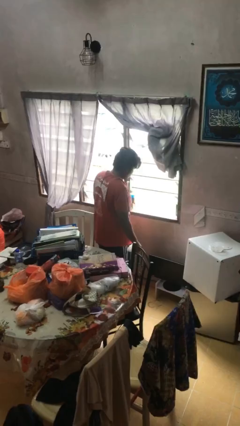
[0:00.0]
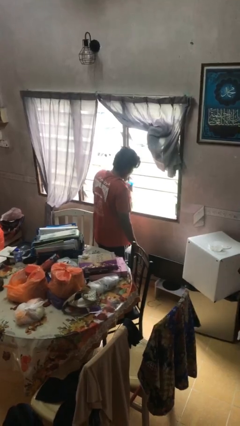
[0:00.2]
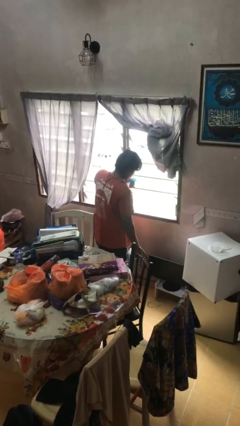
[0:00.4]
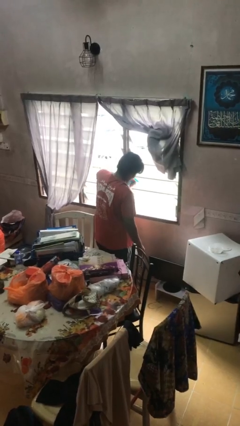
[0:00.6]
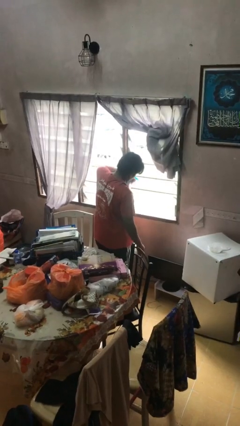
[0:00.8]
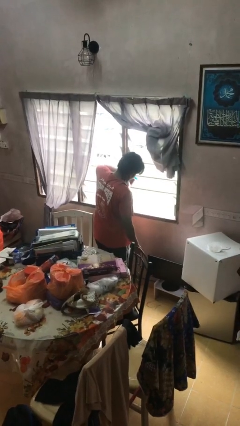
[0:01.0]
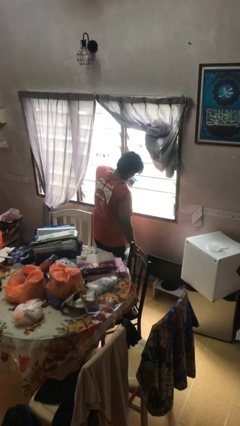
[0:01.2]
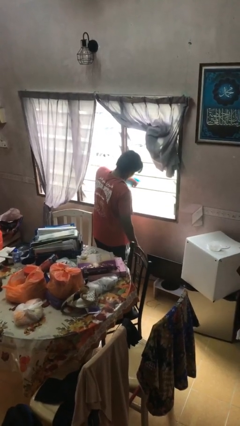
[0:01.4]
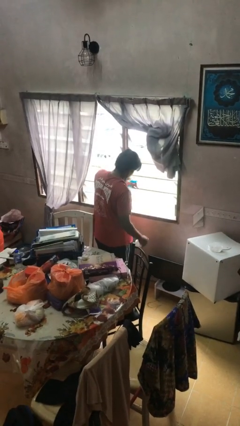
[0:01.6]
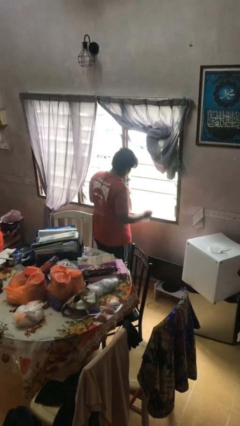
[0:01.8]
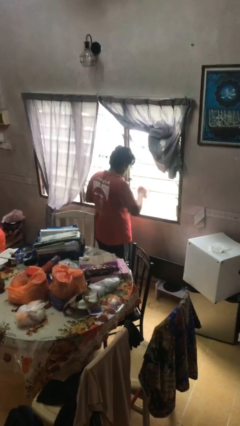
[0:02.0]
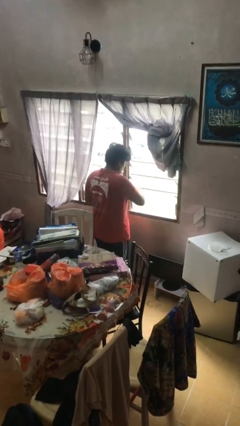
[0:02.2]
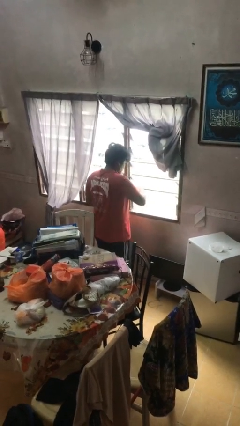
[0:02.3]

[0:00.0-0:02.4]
person sprays from bottle

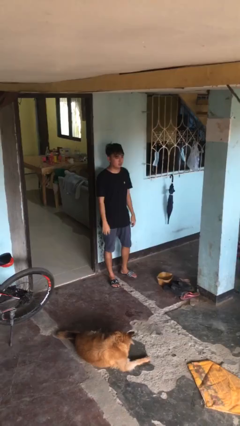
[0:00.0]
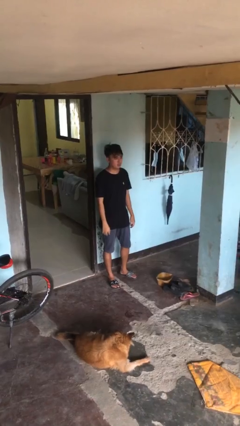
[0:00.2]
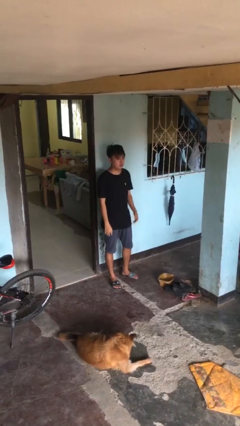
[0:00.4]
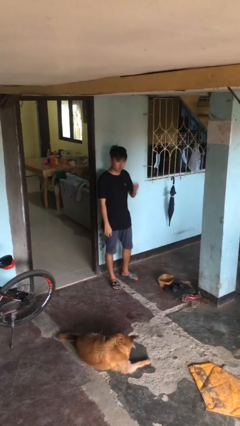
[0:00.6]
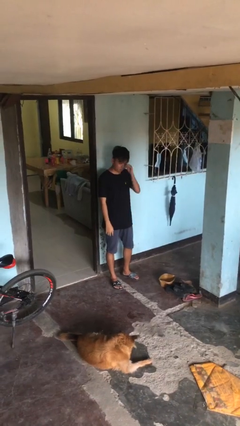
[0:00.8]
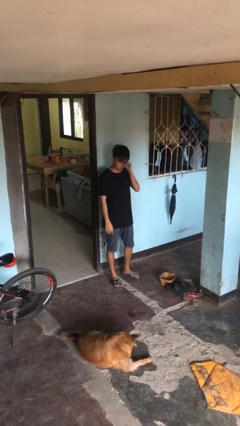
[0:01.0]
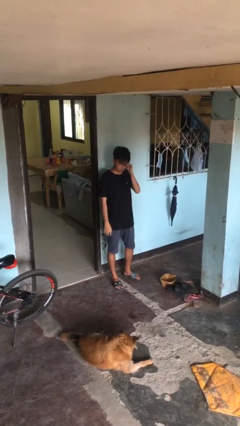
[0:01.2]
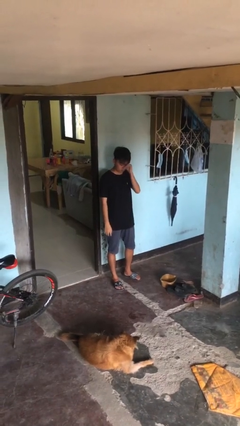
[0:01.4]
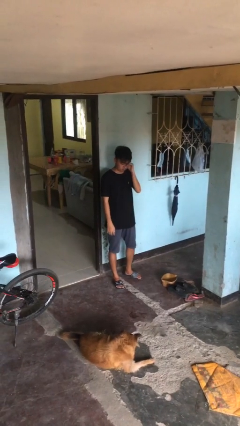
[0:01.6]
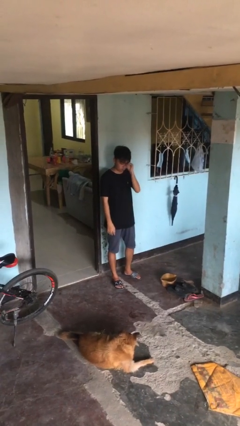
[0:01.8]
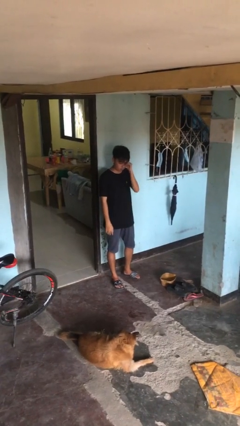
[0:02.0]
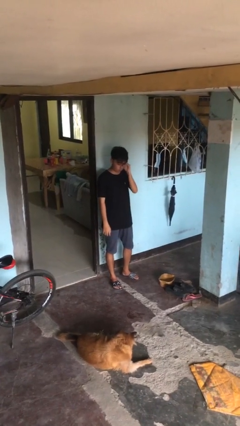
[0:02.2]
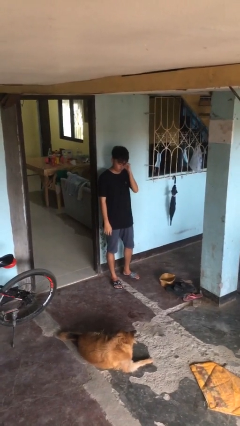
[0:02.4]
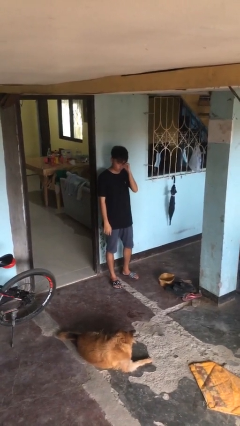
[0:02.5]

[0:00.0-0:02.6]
person rubs eyes

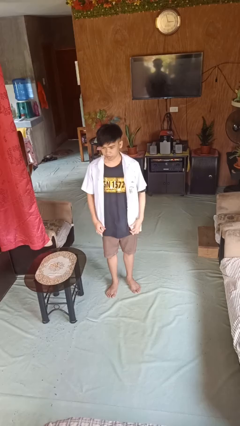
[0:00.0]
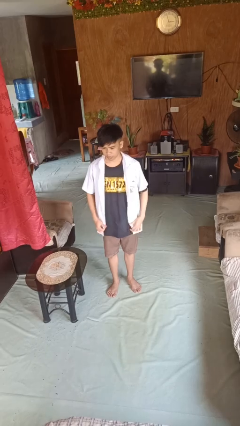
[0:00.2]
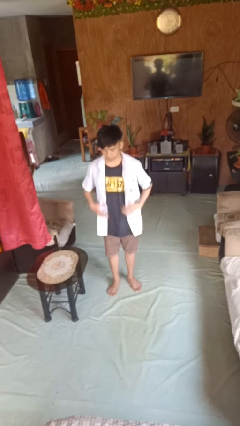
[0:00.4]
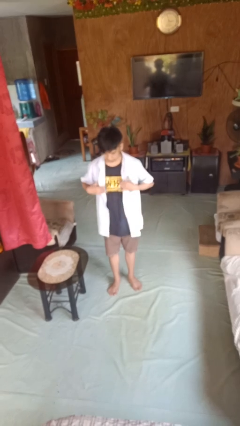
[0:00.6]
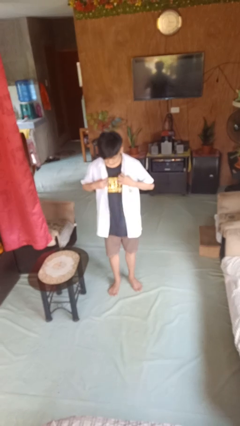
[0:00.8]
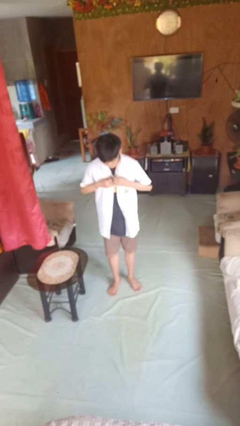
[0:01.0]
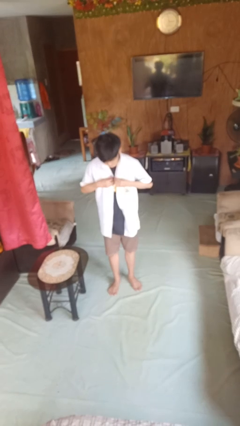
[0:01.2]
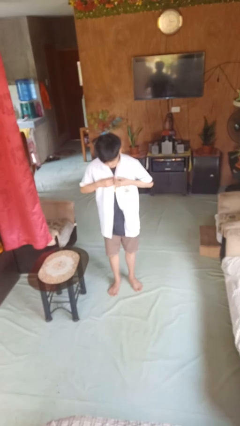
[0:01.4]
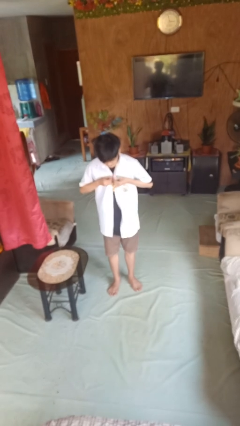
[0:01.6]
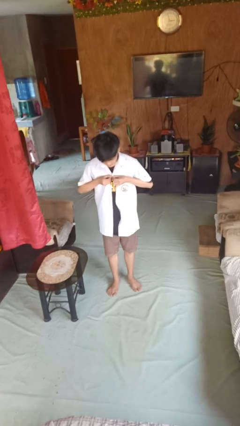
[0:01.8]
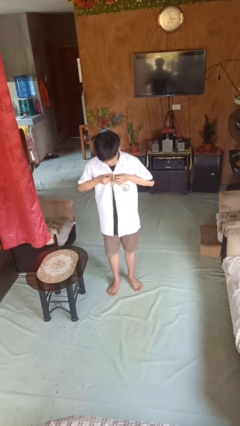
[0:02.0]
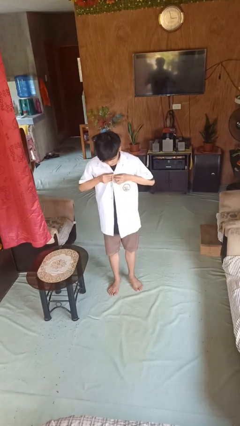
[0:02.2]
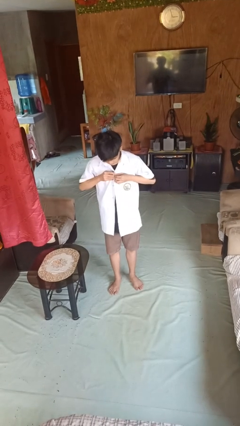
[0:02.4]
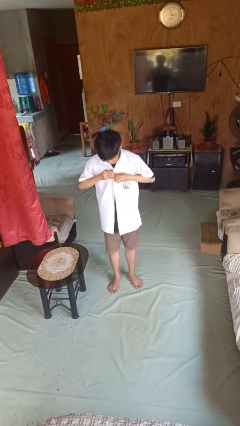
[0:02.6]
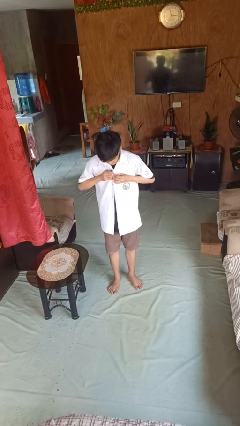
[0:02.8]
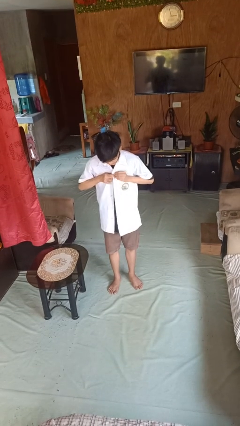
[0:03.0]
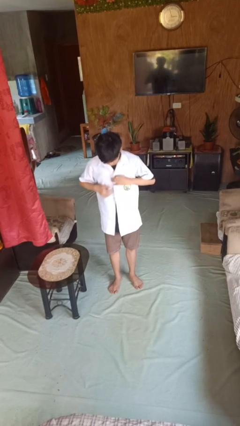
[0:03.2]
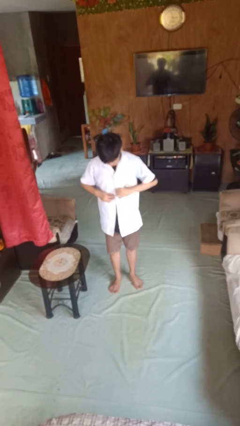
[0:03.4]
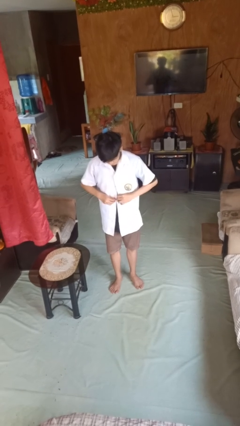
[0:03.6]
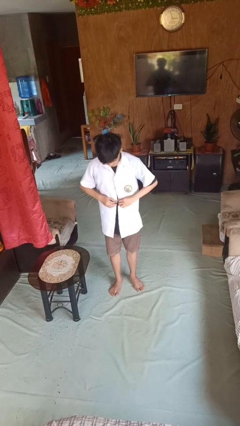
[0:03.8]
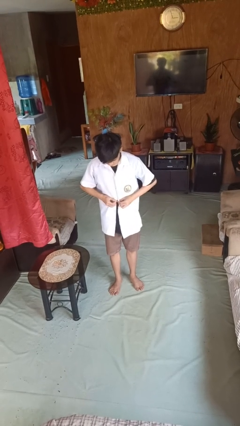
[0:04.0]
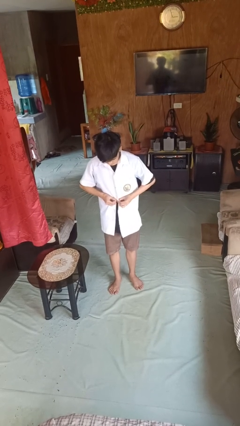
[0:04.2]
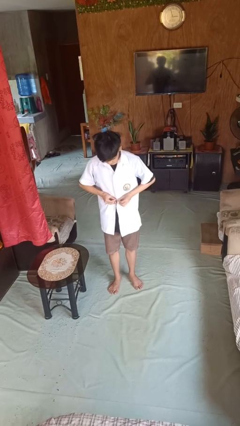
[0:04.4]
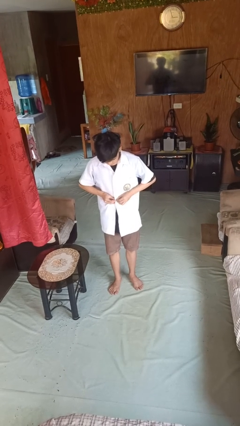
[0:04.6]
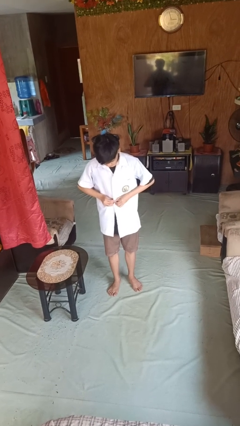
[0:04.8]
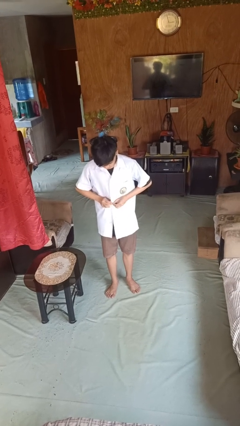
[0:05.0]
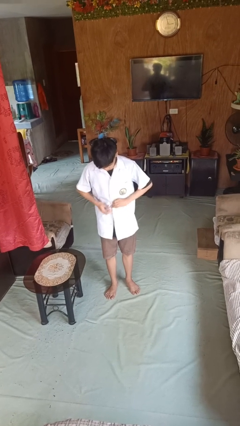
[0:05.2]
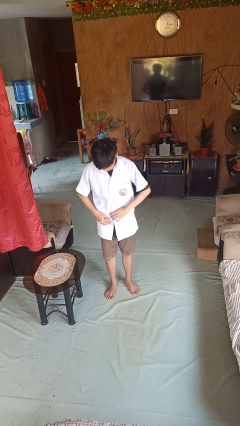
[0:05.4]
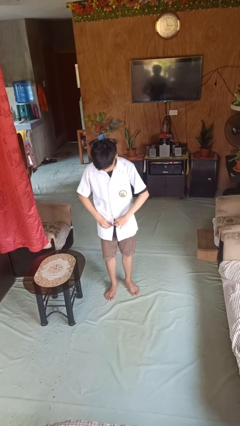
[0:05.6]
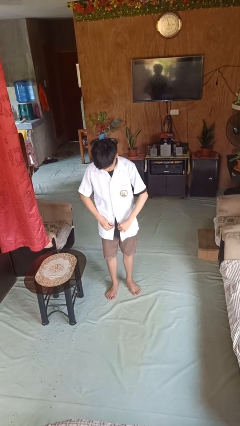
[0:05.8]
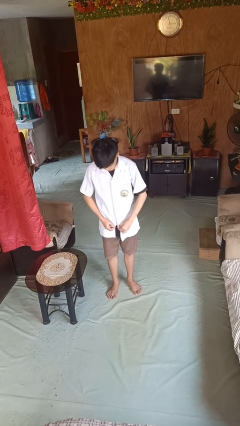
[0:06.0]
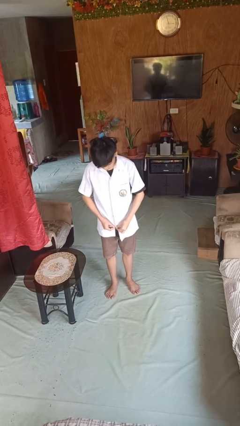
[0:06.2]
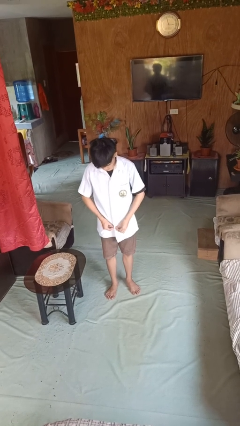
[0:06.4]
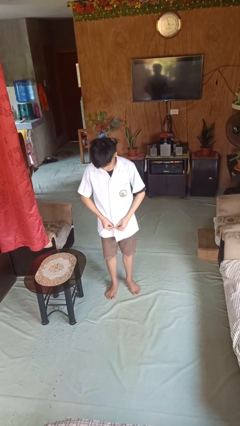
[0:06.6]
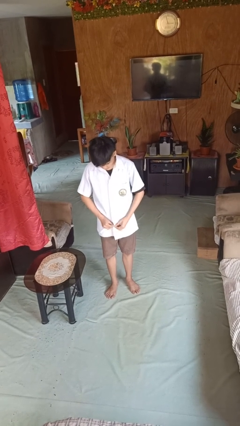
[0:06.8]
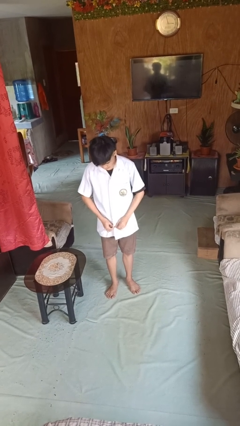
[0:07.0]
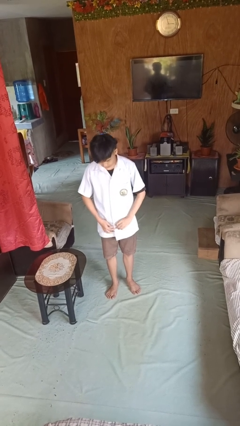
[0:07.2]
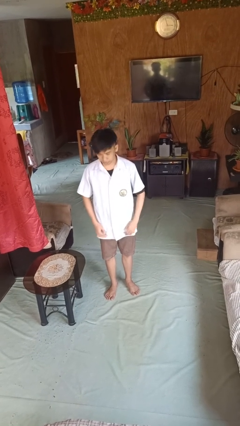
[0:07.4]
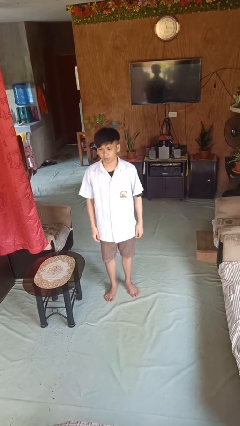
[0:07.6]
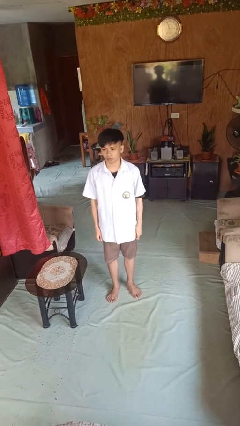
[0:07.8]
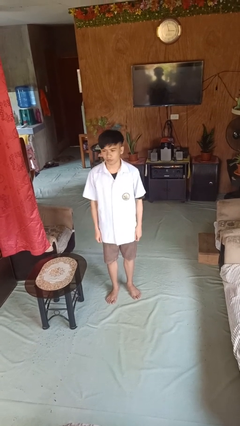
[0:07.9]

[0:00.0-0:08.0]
person buttons shirt

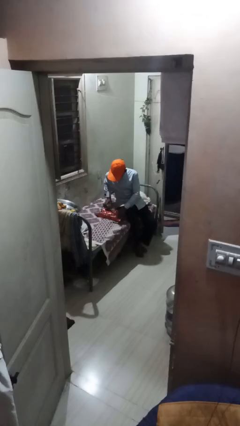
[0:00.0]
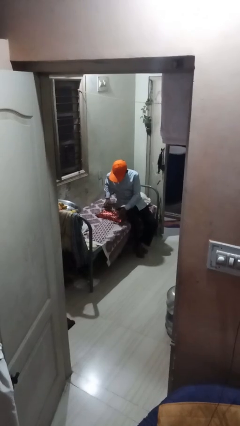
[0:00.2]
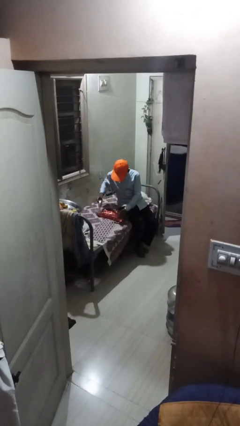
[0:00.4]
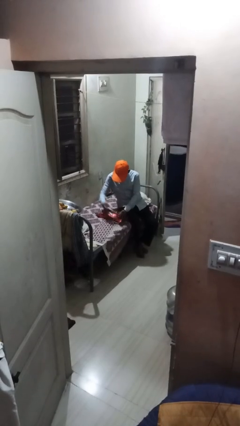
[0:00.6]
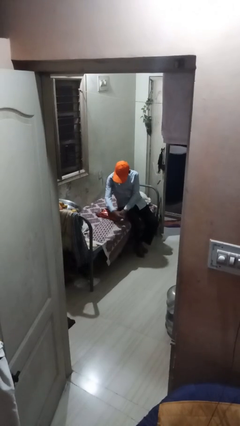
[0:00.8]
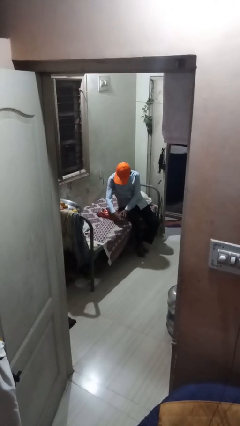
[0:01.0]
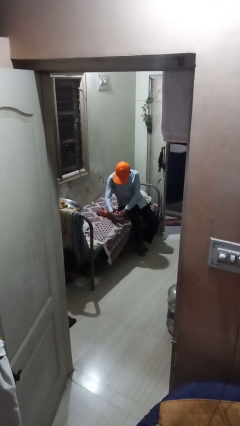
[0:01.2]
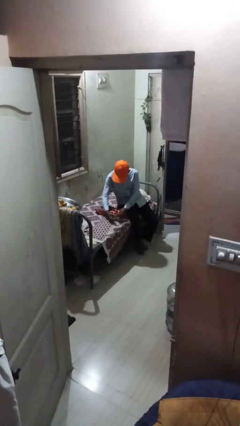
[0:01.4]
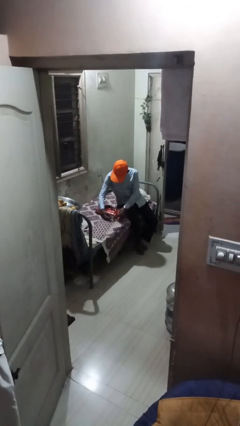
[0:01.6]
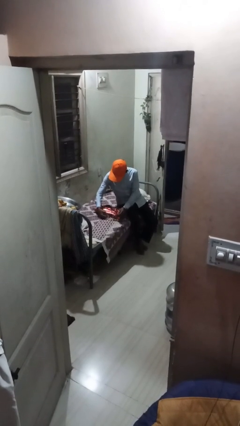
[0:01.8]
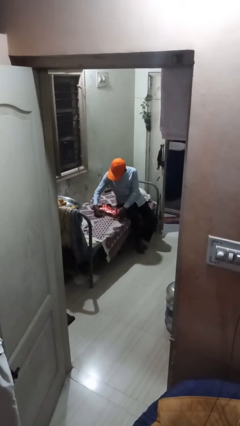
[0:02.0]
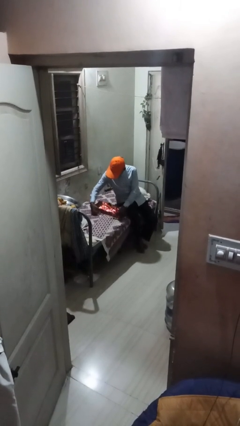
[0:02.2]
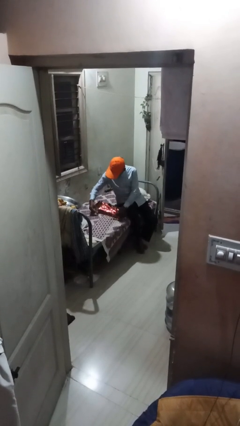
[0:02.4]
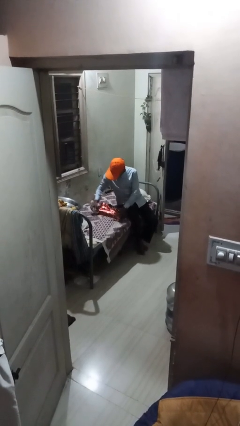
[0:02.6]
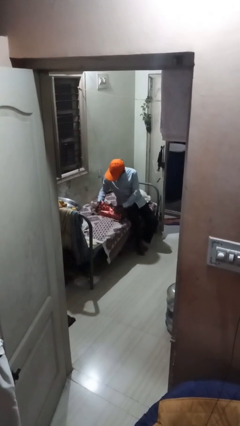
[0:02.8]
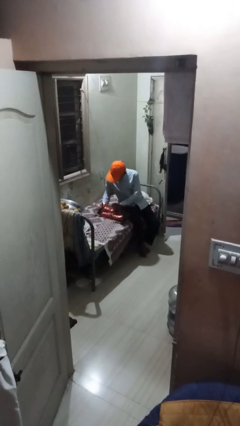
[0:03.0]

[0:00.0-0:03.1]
person wraps box

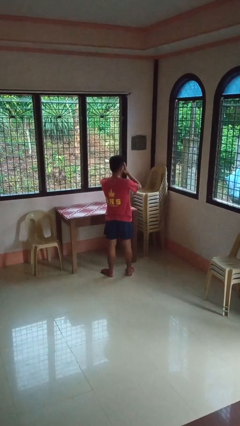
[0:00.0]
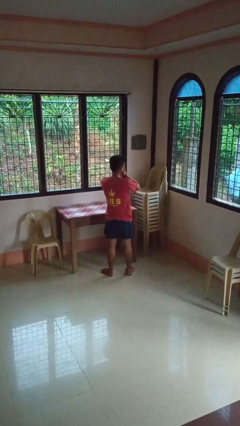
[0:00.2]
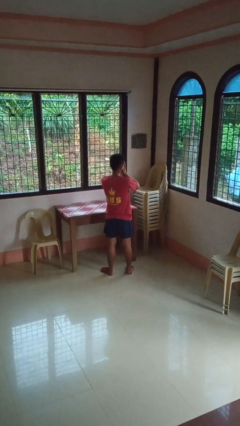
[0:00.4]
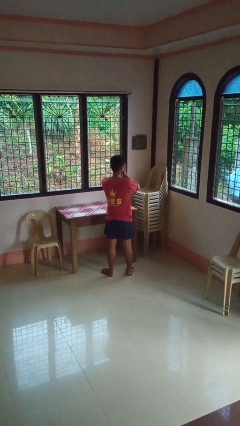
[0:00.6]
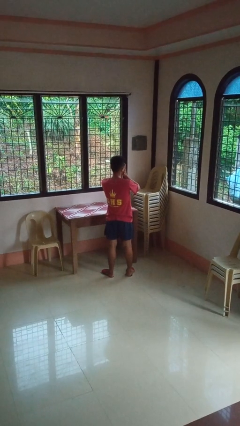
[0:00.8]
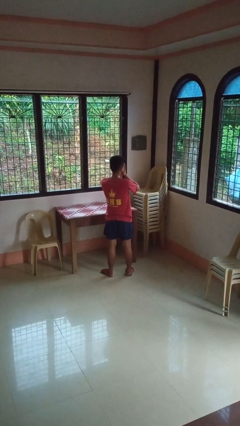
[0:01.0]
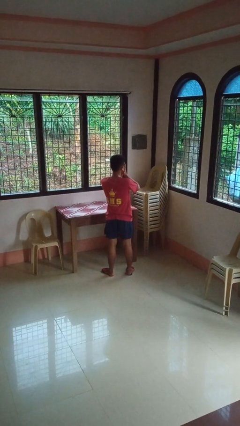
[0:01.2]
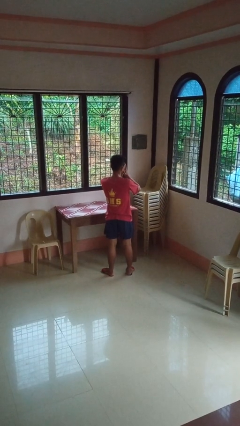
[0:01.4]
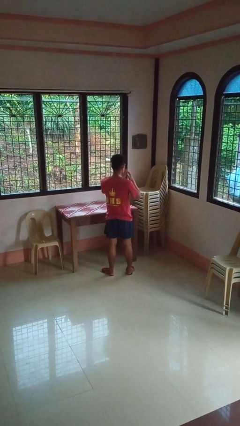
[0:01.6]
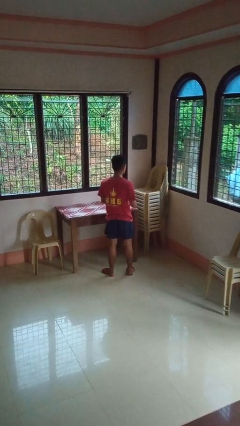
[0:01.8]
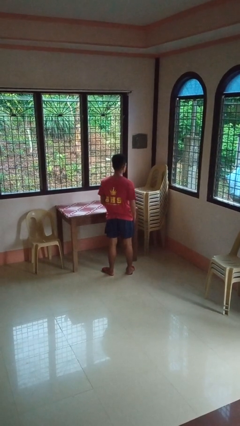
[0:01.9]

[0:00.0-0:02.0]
person covers face with hands
